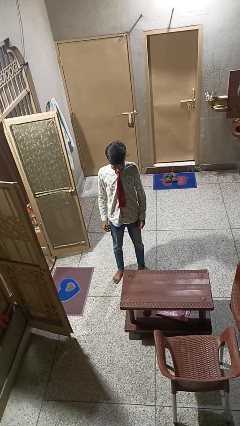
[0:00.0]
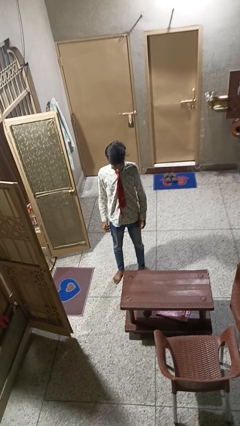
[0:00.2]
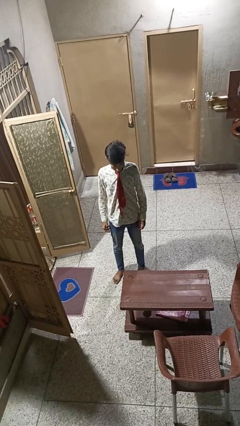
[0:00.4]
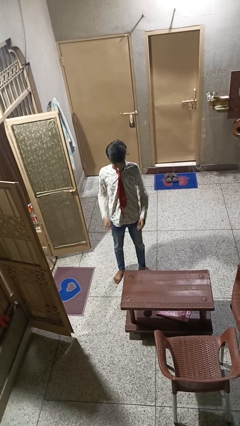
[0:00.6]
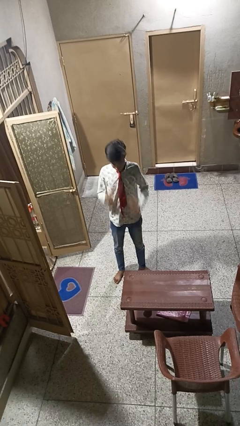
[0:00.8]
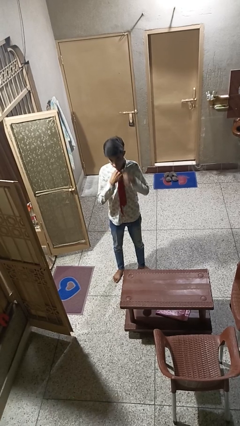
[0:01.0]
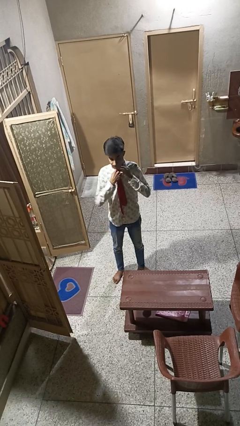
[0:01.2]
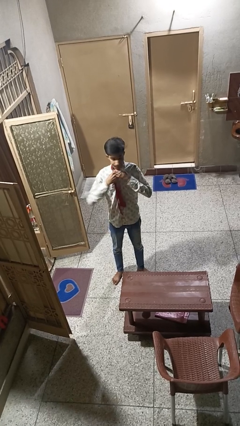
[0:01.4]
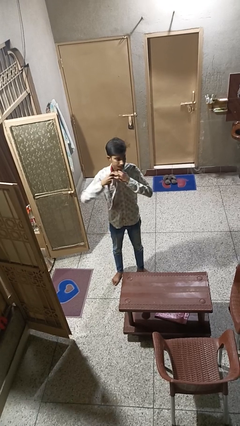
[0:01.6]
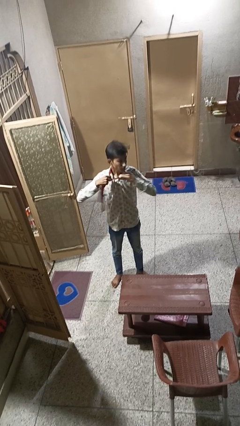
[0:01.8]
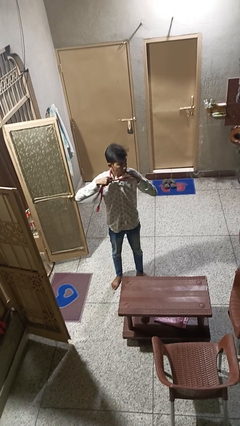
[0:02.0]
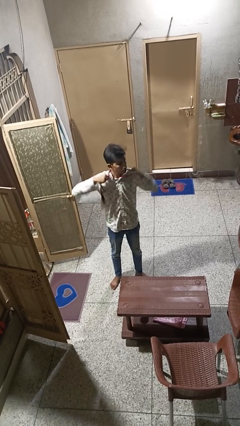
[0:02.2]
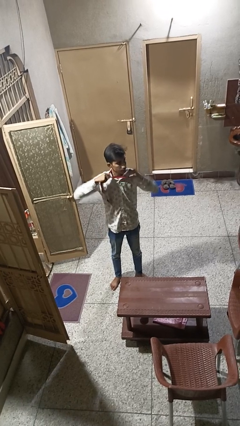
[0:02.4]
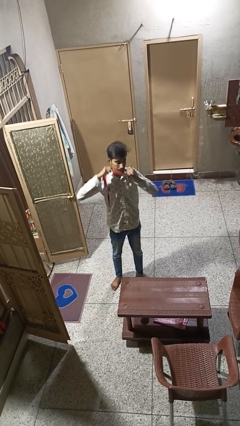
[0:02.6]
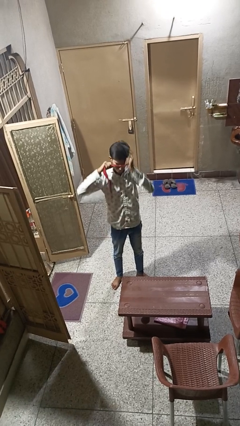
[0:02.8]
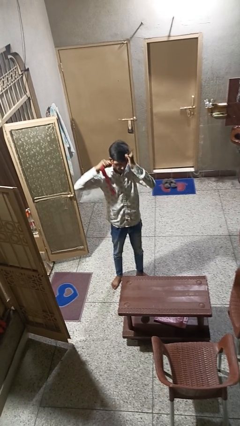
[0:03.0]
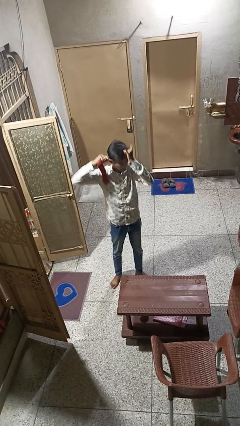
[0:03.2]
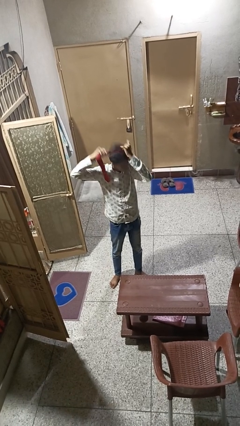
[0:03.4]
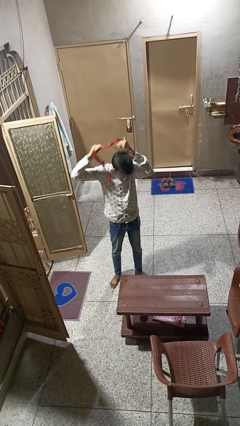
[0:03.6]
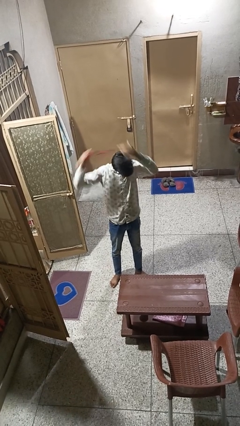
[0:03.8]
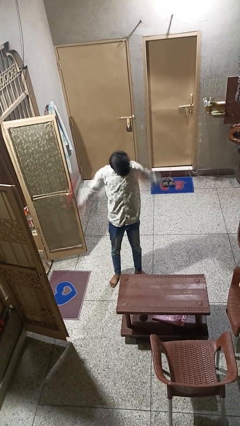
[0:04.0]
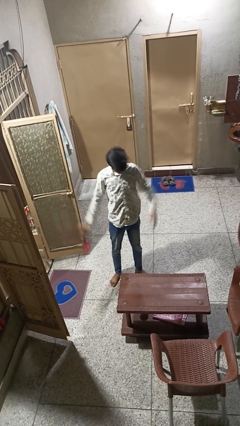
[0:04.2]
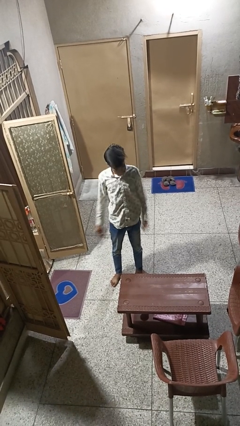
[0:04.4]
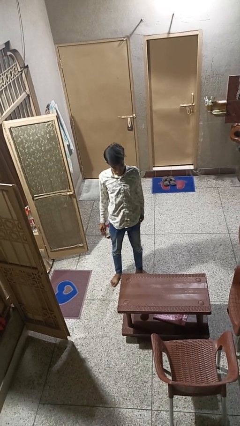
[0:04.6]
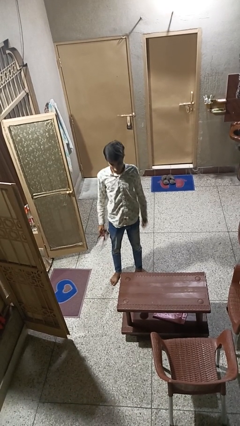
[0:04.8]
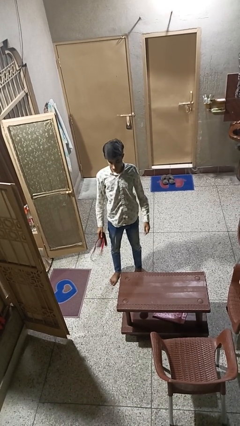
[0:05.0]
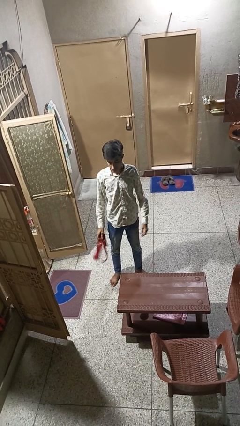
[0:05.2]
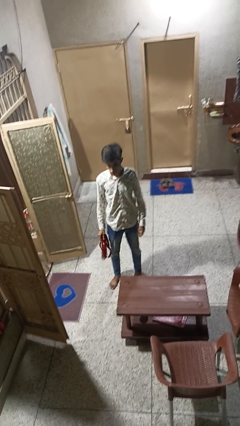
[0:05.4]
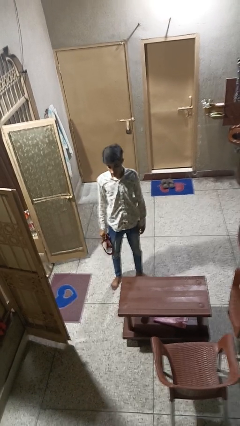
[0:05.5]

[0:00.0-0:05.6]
person takes off necktie

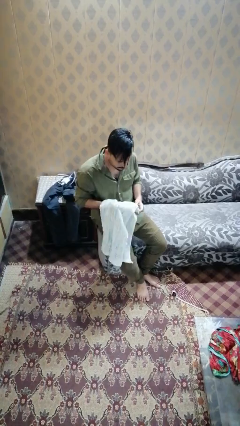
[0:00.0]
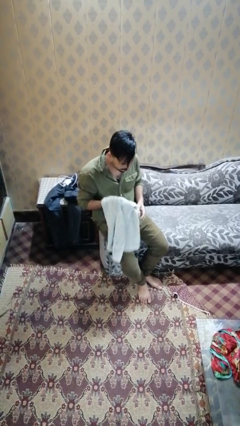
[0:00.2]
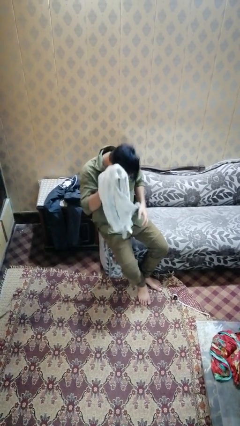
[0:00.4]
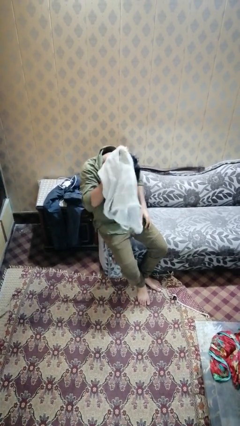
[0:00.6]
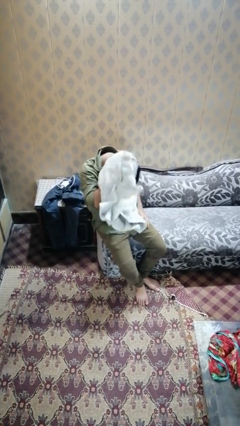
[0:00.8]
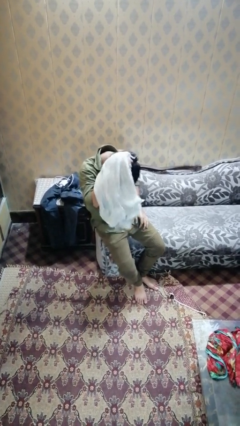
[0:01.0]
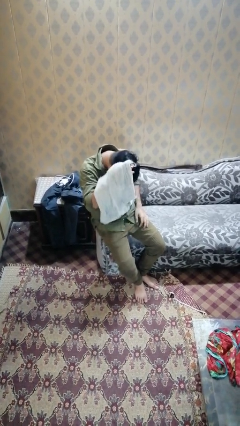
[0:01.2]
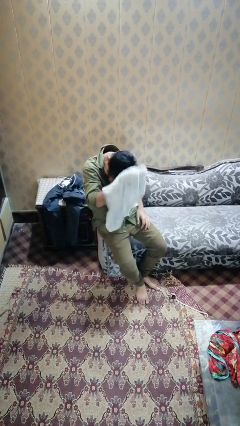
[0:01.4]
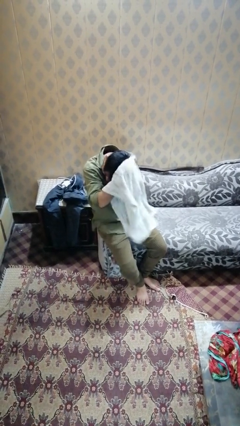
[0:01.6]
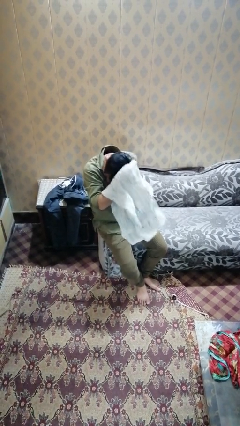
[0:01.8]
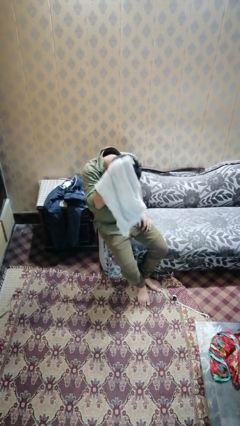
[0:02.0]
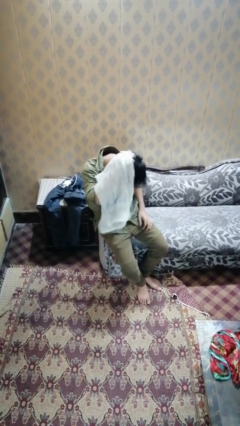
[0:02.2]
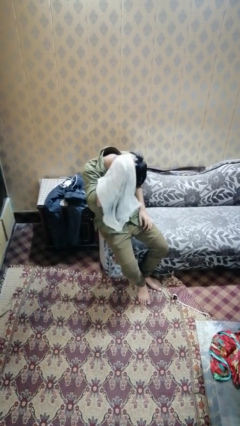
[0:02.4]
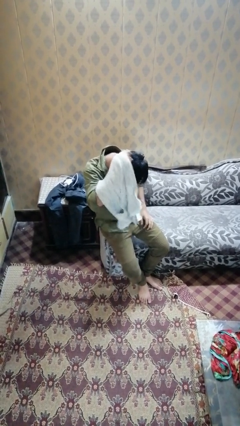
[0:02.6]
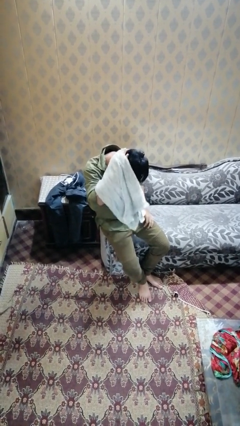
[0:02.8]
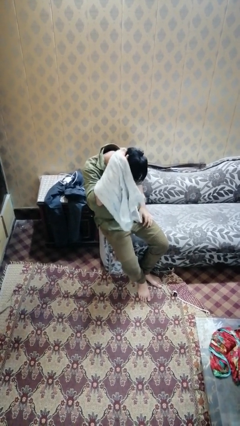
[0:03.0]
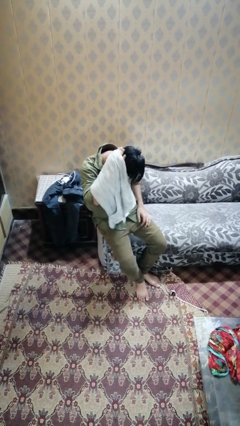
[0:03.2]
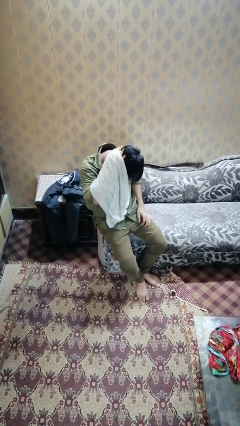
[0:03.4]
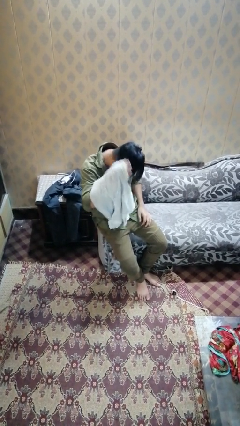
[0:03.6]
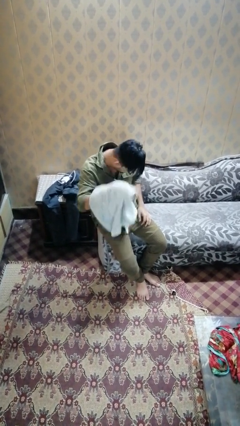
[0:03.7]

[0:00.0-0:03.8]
person dries hair with towel

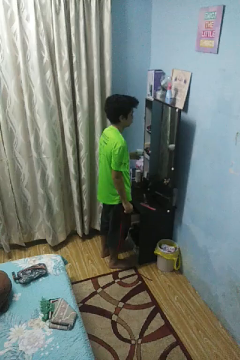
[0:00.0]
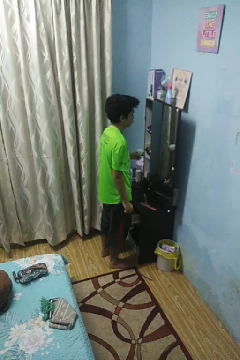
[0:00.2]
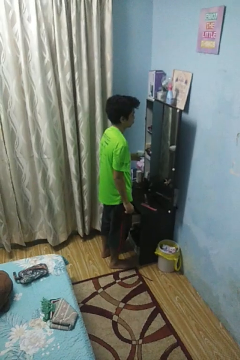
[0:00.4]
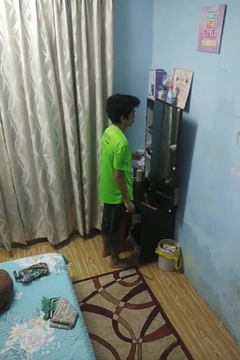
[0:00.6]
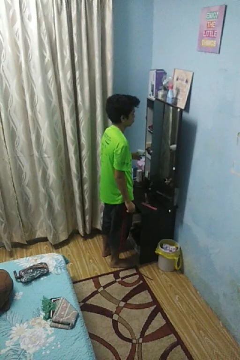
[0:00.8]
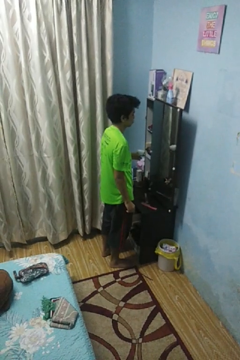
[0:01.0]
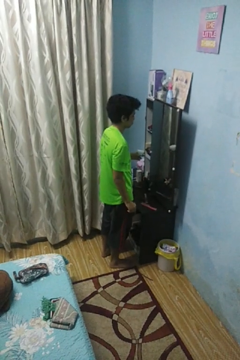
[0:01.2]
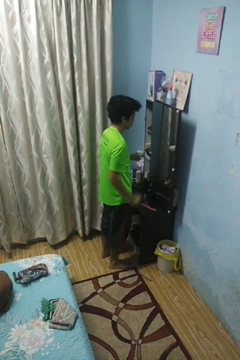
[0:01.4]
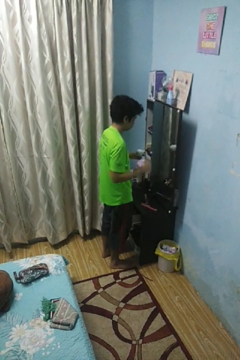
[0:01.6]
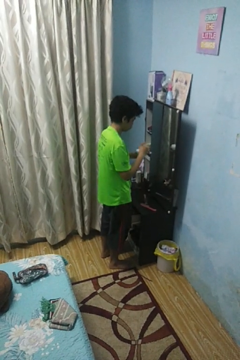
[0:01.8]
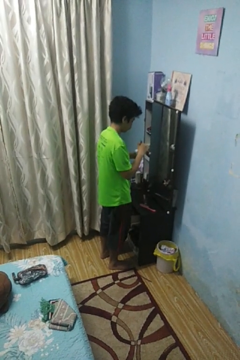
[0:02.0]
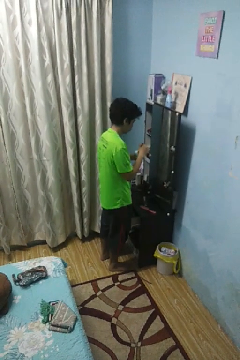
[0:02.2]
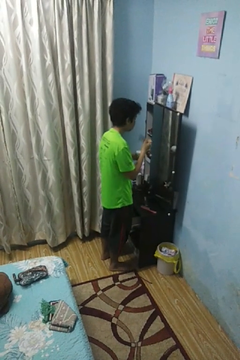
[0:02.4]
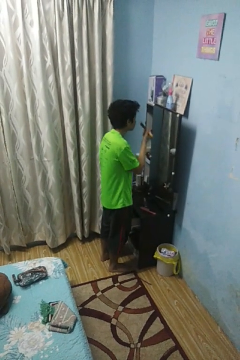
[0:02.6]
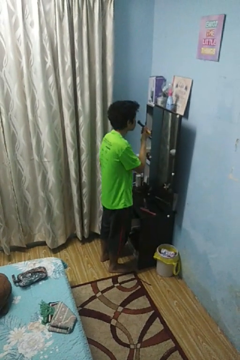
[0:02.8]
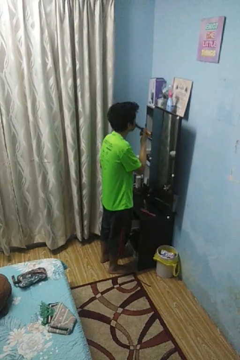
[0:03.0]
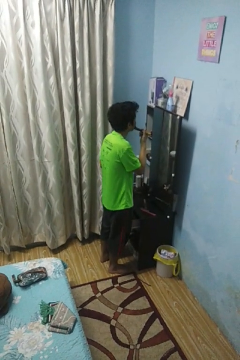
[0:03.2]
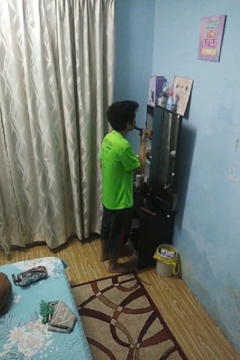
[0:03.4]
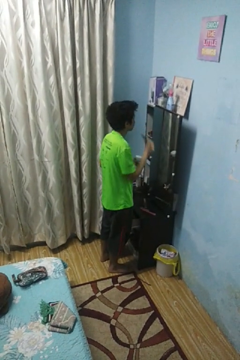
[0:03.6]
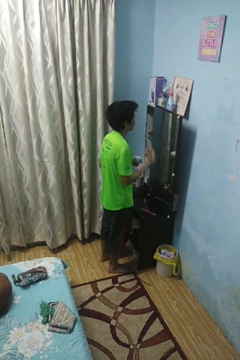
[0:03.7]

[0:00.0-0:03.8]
person applies foundation makeup

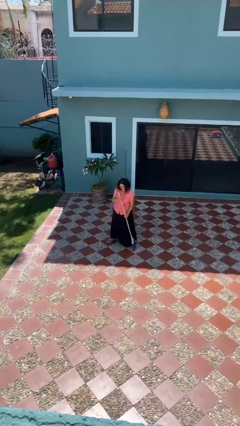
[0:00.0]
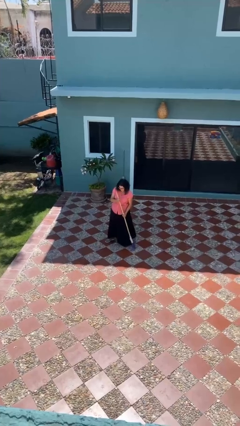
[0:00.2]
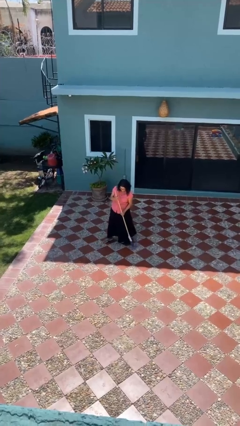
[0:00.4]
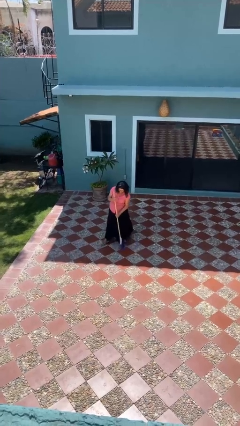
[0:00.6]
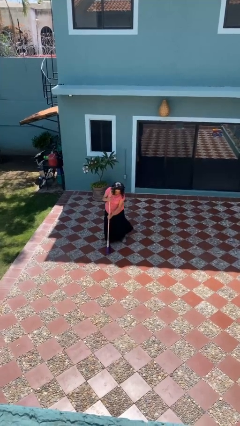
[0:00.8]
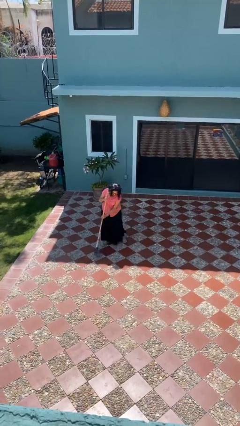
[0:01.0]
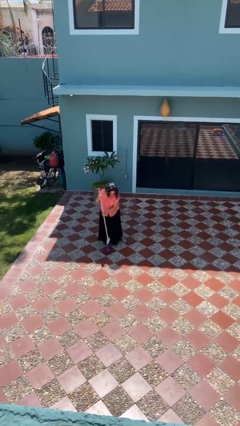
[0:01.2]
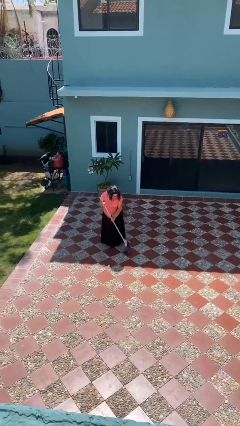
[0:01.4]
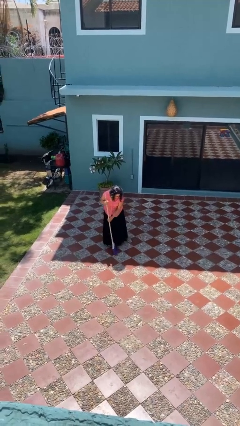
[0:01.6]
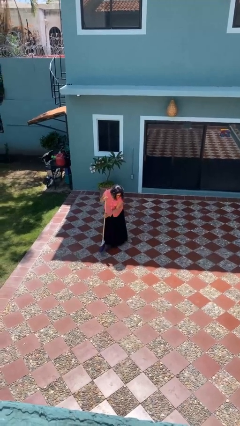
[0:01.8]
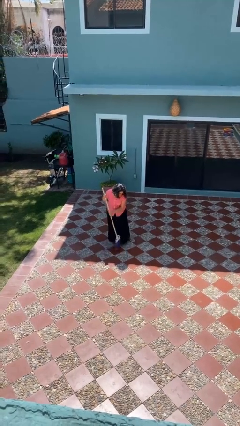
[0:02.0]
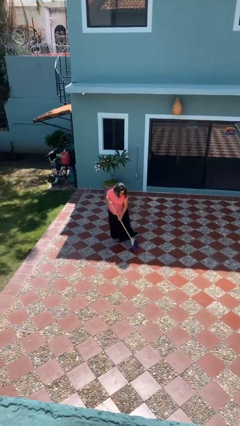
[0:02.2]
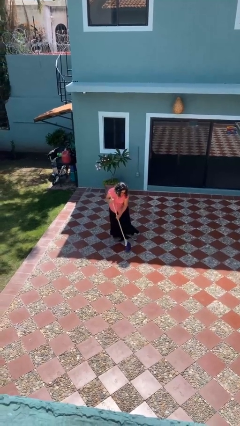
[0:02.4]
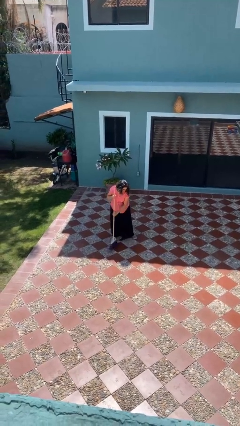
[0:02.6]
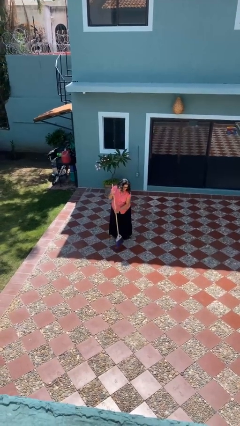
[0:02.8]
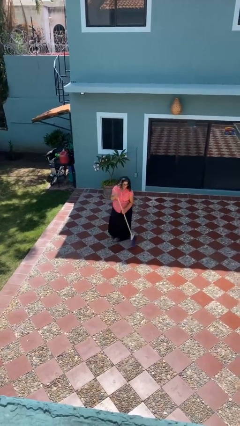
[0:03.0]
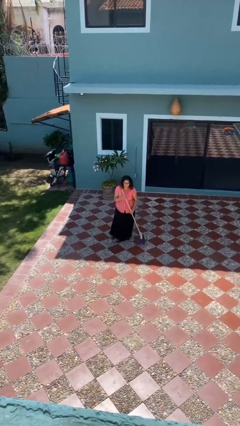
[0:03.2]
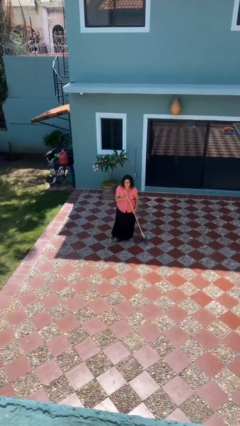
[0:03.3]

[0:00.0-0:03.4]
person sweeps floor

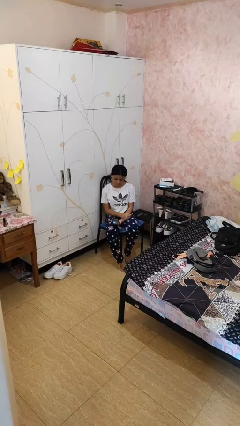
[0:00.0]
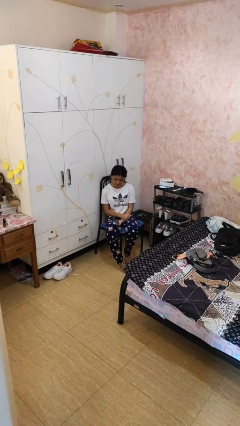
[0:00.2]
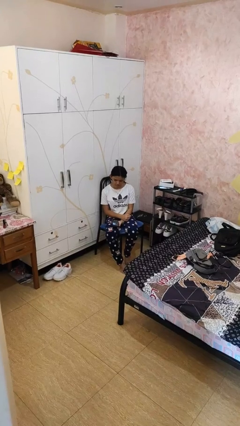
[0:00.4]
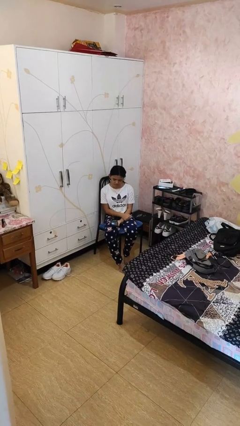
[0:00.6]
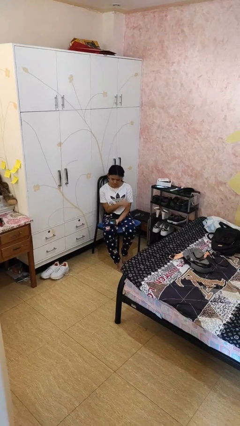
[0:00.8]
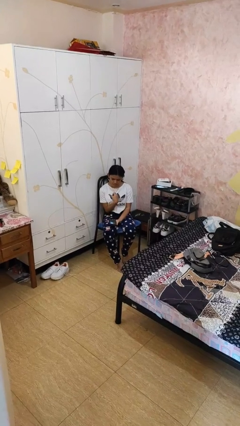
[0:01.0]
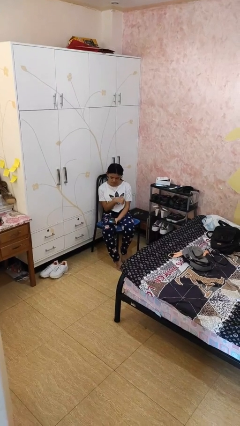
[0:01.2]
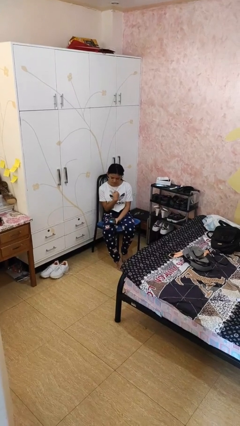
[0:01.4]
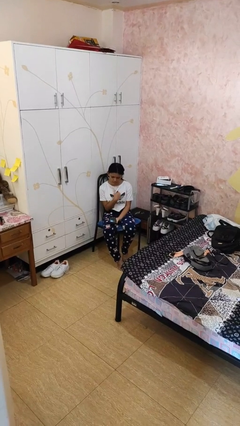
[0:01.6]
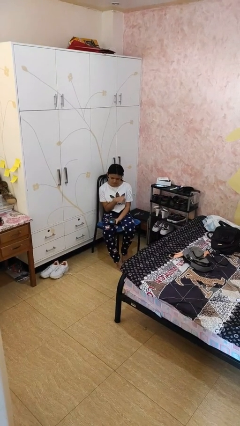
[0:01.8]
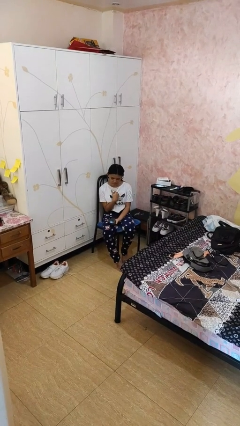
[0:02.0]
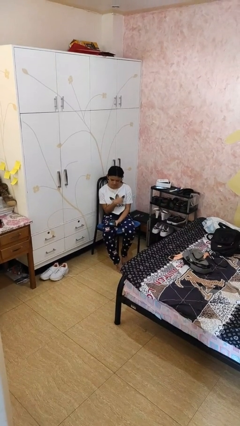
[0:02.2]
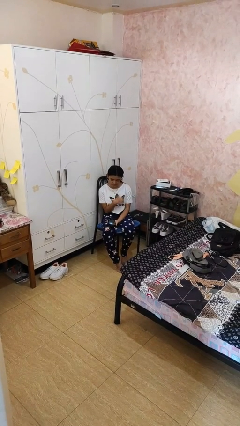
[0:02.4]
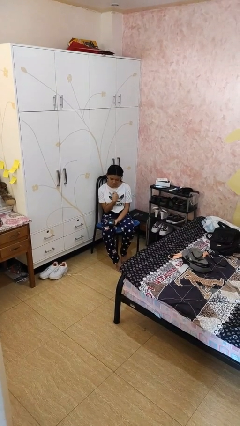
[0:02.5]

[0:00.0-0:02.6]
person gestures cut
